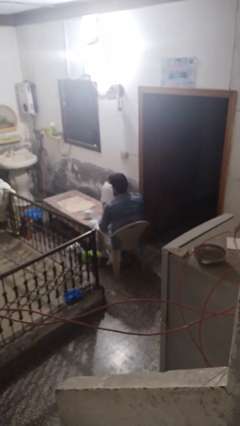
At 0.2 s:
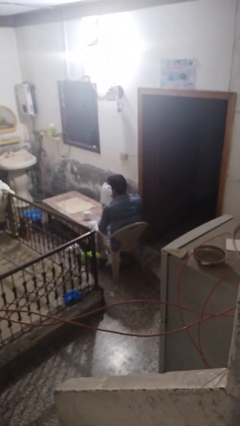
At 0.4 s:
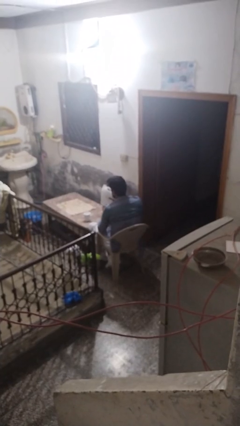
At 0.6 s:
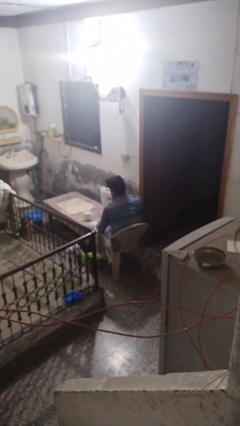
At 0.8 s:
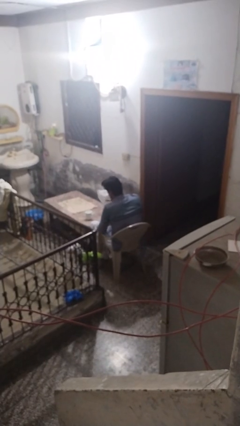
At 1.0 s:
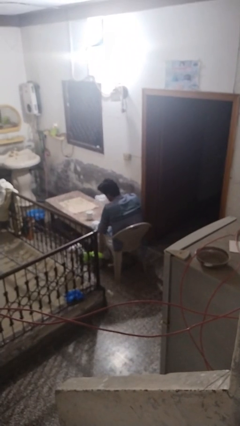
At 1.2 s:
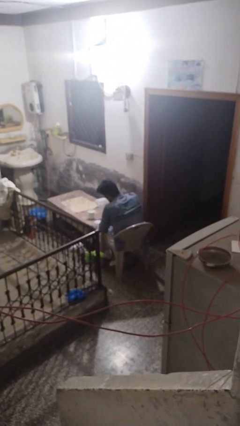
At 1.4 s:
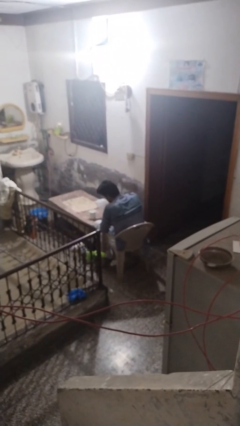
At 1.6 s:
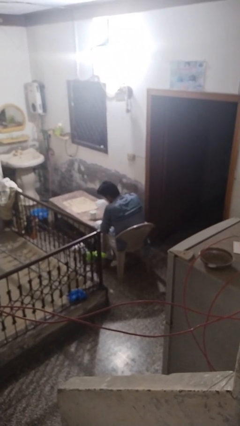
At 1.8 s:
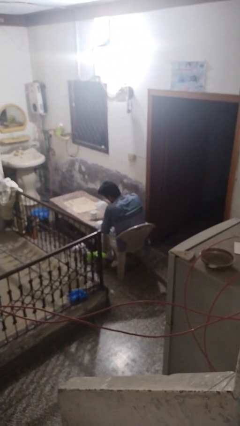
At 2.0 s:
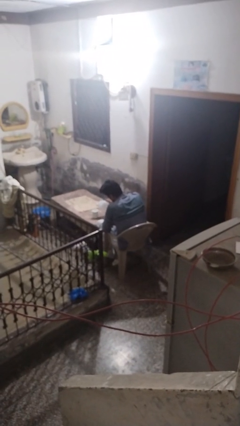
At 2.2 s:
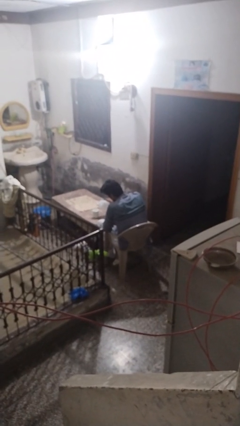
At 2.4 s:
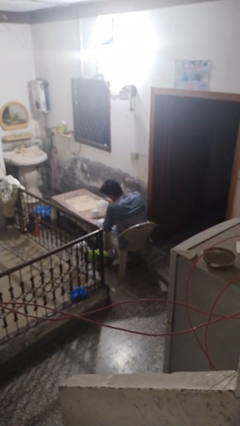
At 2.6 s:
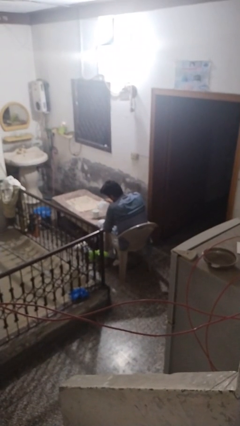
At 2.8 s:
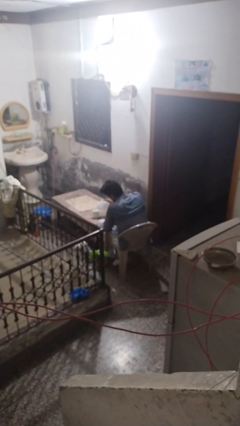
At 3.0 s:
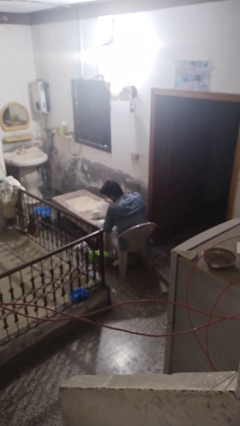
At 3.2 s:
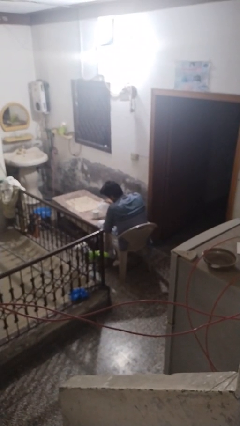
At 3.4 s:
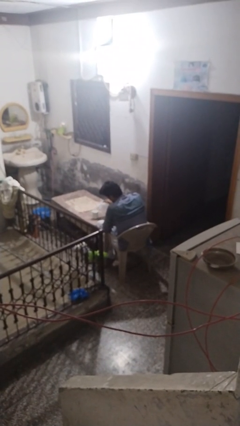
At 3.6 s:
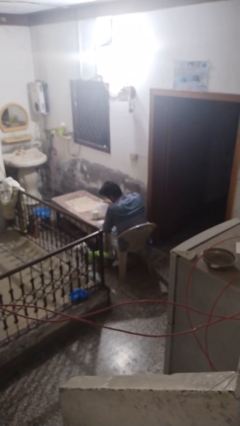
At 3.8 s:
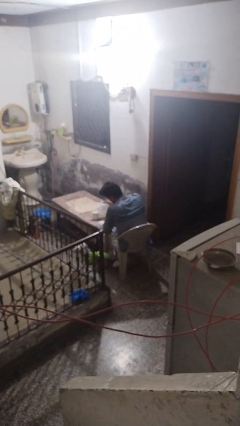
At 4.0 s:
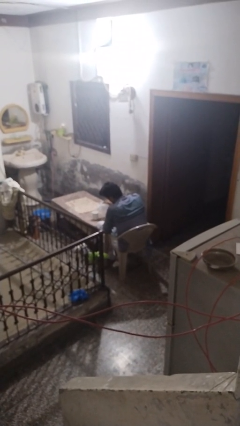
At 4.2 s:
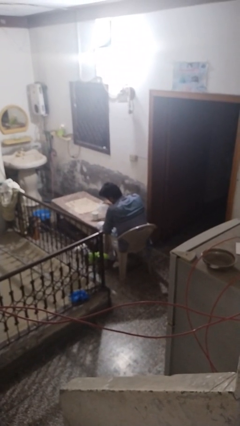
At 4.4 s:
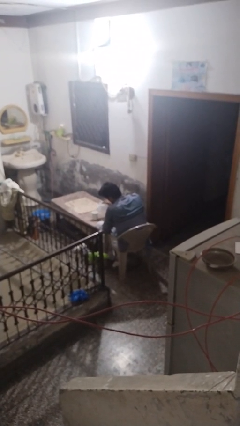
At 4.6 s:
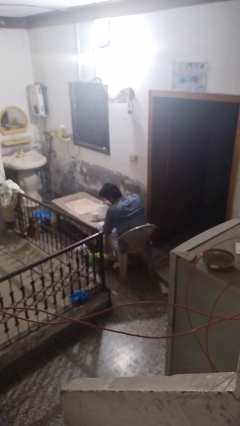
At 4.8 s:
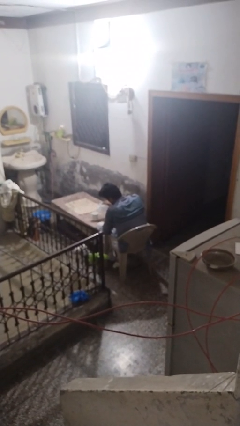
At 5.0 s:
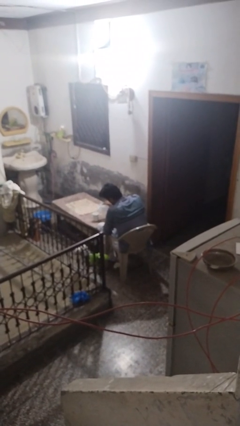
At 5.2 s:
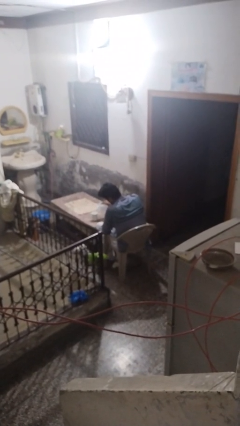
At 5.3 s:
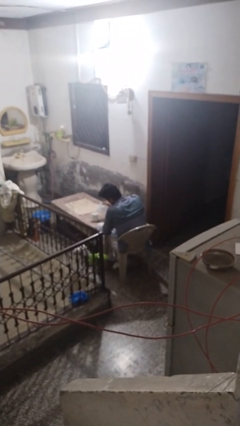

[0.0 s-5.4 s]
person pours liquid into cup

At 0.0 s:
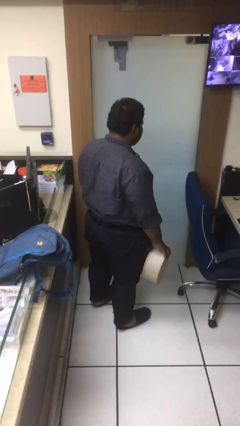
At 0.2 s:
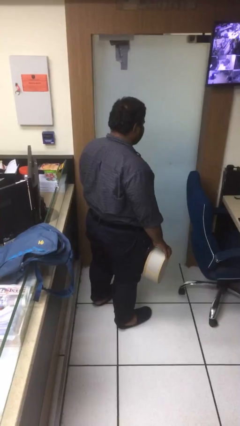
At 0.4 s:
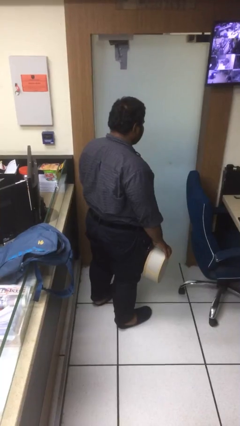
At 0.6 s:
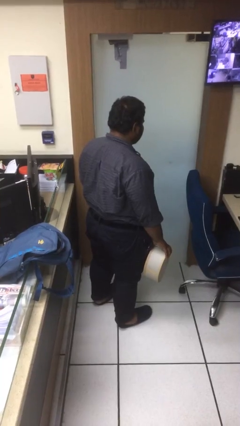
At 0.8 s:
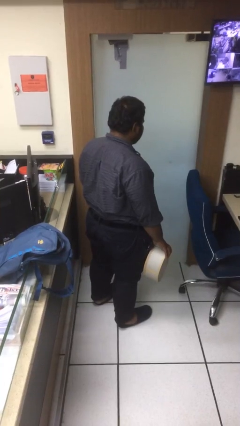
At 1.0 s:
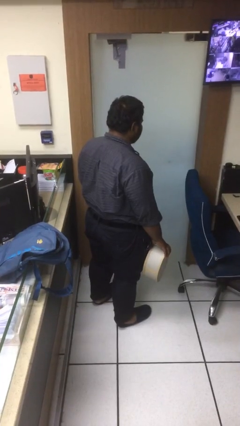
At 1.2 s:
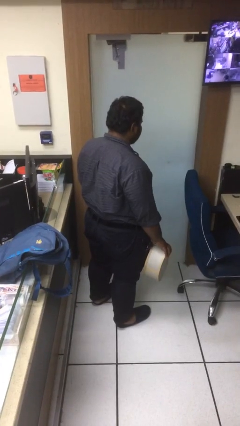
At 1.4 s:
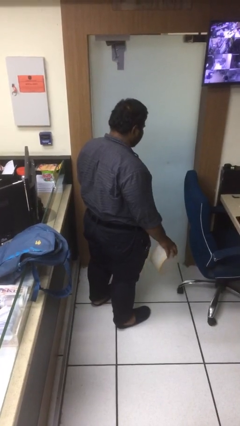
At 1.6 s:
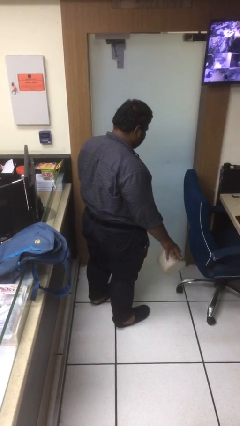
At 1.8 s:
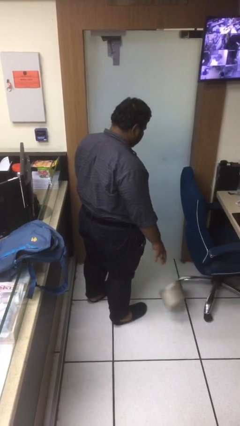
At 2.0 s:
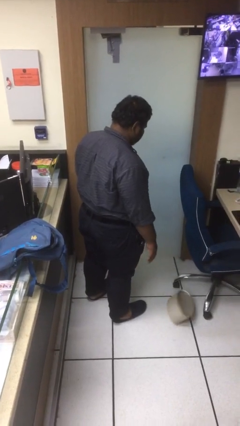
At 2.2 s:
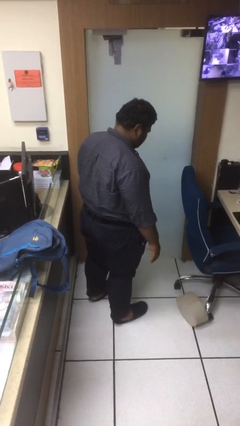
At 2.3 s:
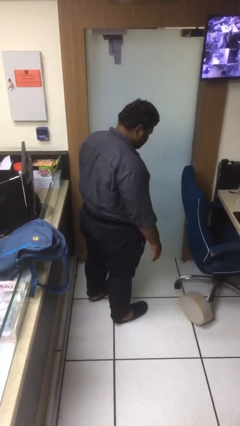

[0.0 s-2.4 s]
person drops object

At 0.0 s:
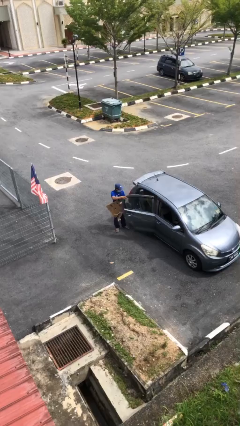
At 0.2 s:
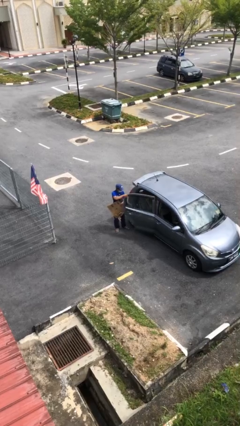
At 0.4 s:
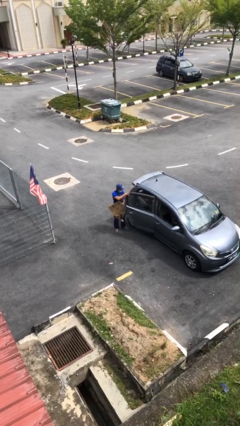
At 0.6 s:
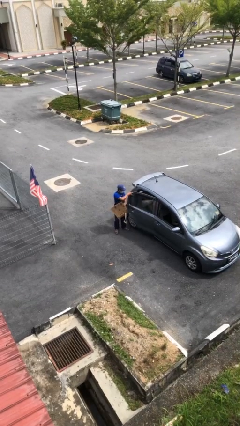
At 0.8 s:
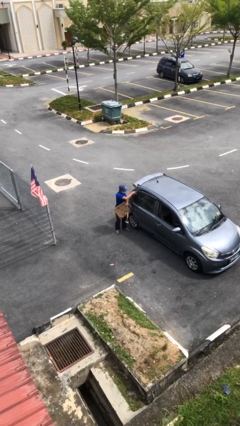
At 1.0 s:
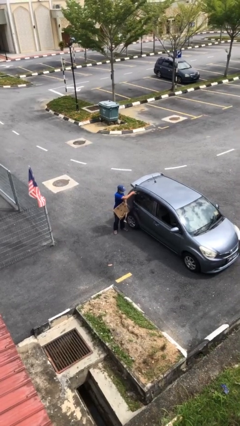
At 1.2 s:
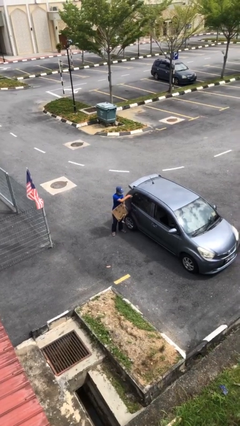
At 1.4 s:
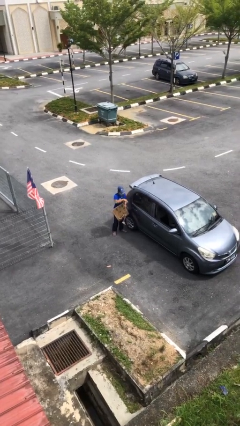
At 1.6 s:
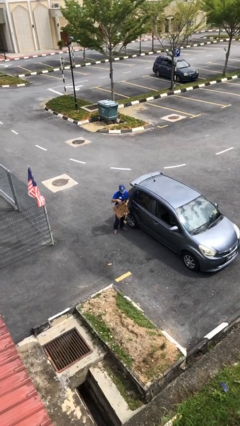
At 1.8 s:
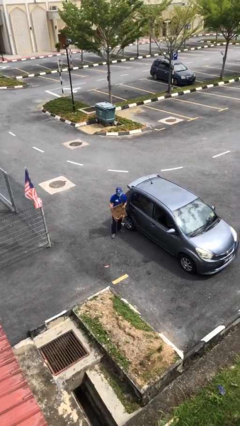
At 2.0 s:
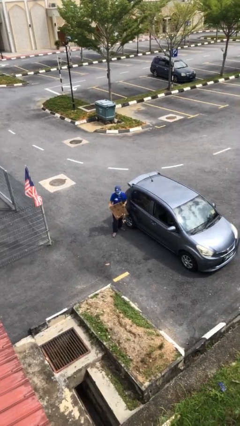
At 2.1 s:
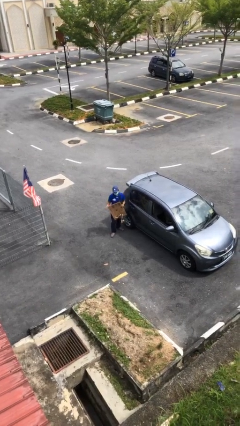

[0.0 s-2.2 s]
person closes car door

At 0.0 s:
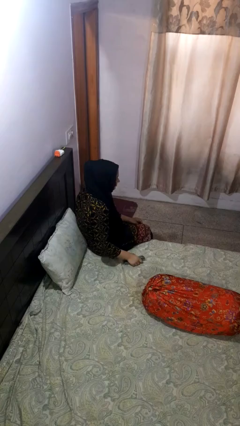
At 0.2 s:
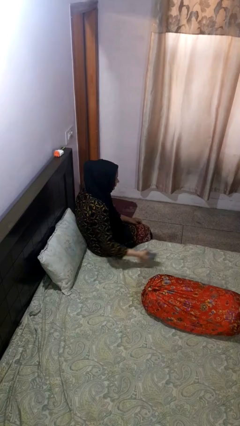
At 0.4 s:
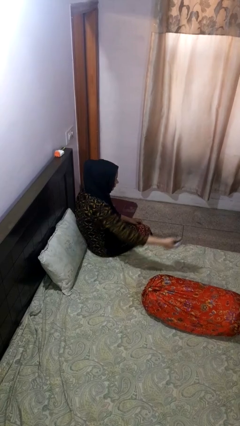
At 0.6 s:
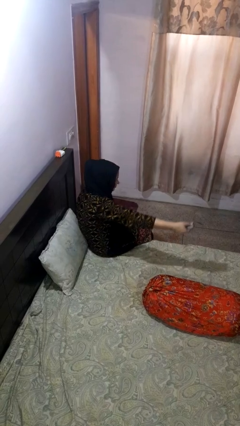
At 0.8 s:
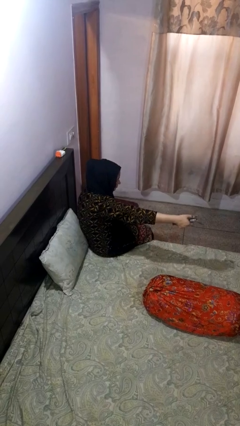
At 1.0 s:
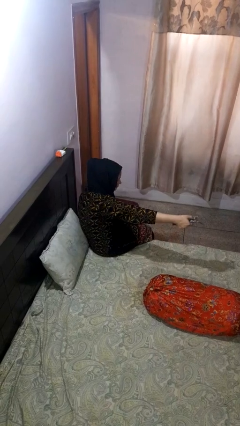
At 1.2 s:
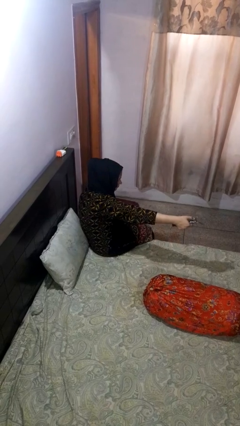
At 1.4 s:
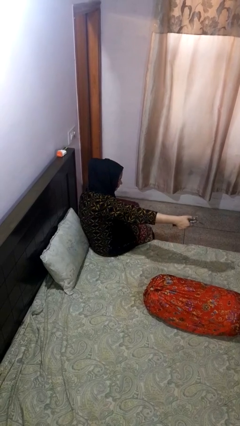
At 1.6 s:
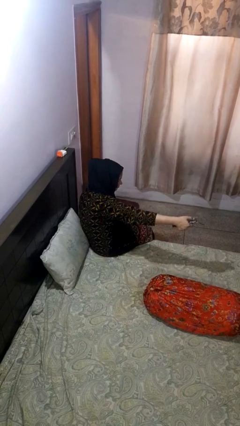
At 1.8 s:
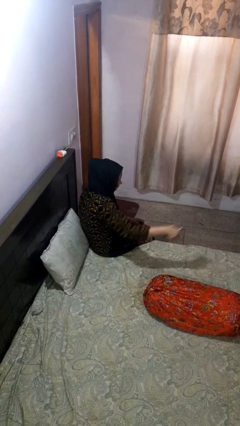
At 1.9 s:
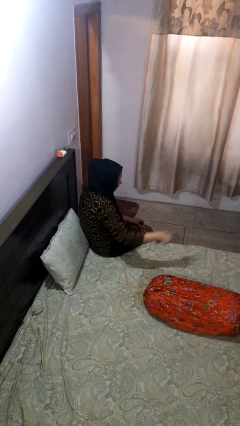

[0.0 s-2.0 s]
person uses television remote

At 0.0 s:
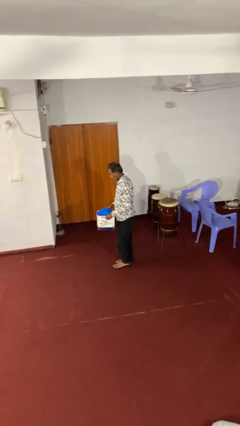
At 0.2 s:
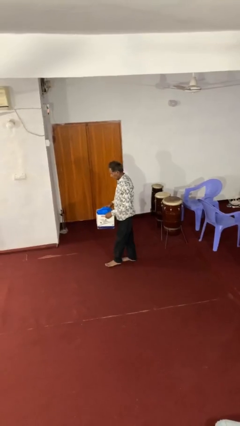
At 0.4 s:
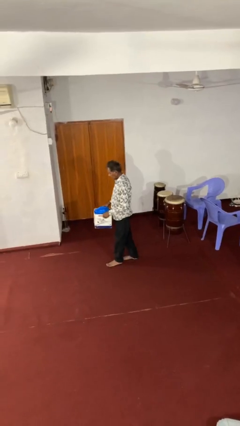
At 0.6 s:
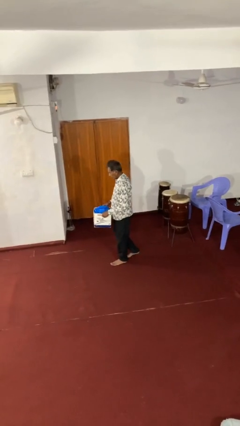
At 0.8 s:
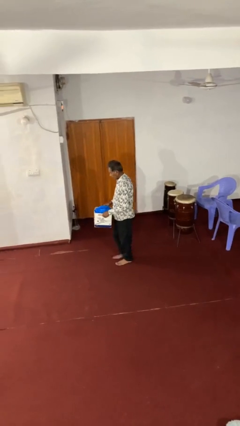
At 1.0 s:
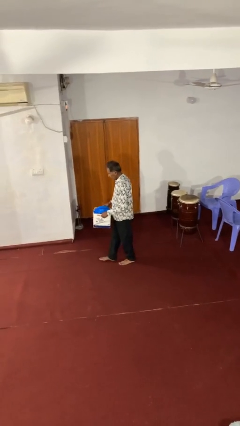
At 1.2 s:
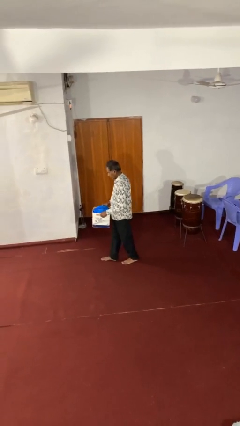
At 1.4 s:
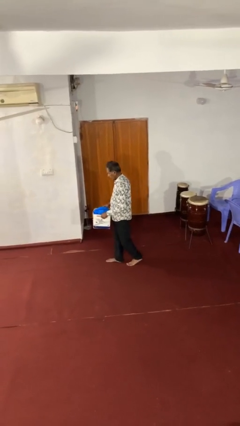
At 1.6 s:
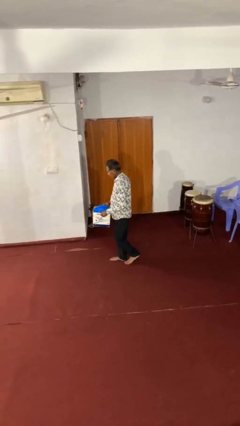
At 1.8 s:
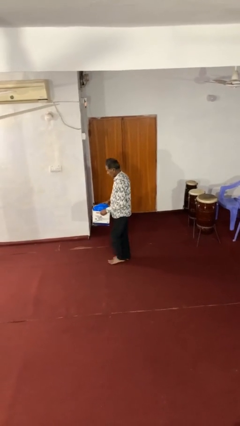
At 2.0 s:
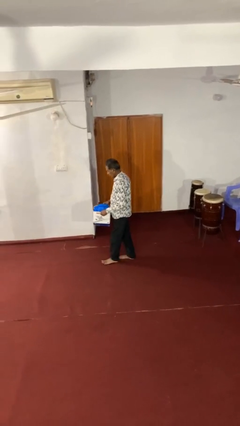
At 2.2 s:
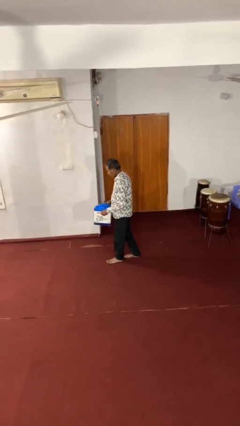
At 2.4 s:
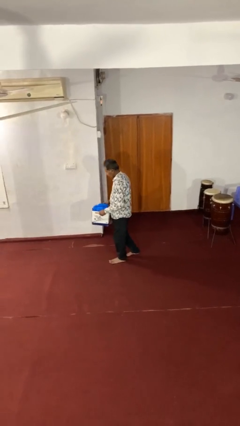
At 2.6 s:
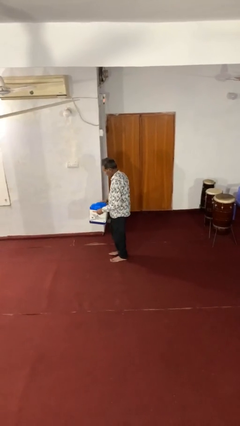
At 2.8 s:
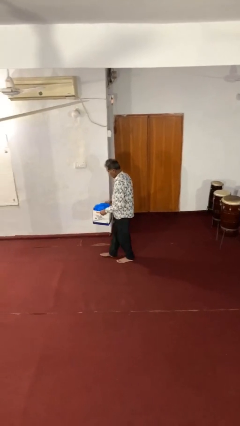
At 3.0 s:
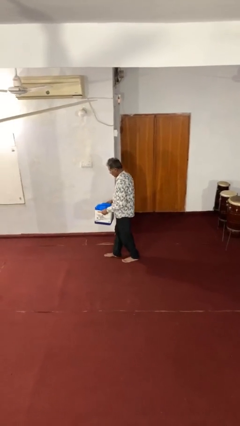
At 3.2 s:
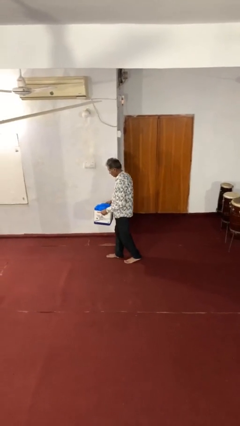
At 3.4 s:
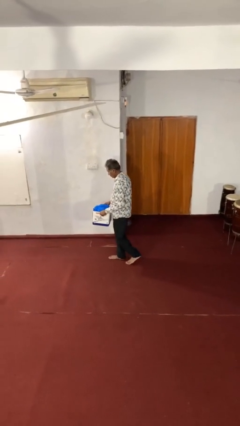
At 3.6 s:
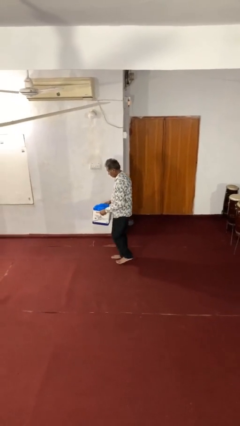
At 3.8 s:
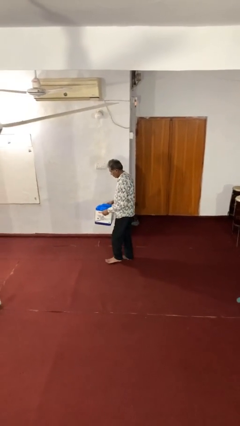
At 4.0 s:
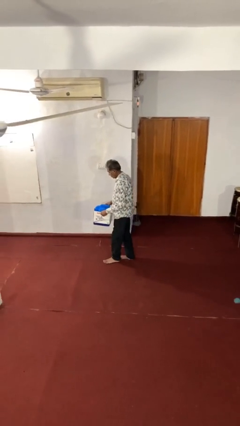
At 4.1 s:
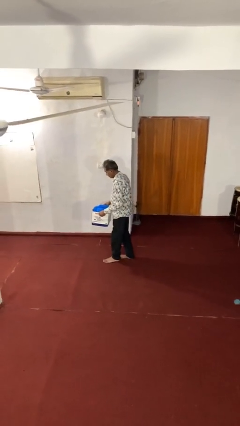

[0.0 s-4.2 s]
person carries heavy object

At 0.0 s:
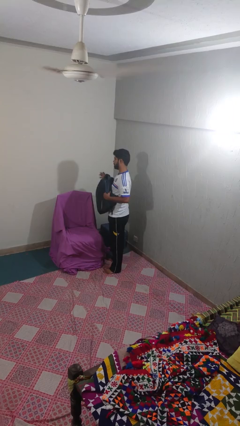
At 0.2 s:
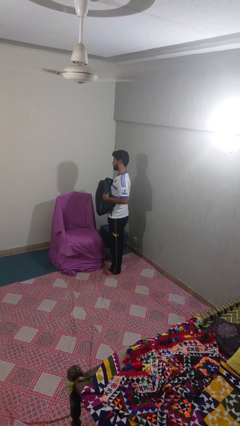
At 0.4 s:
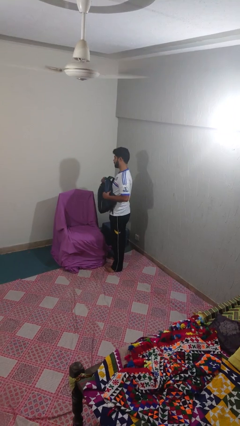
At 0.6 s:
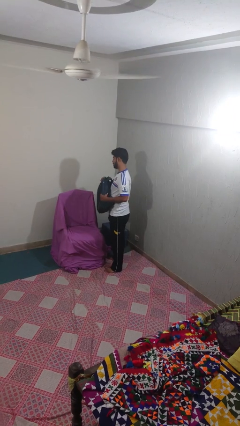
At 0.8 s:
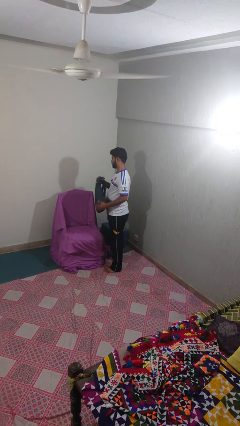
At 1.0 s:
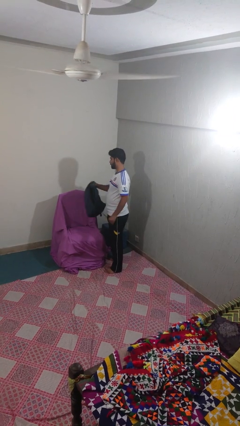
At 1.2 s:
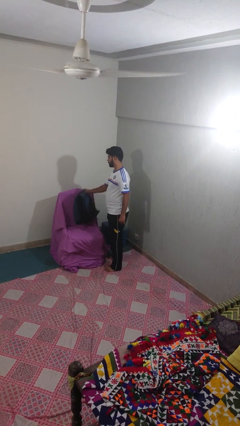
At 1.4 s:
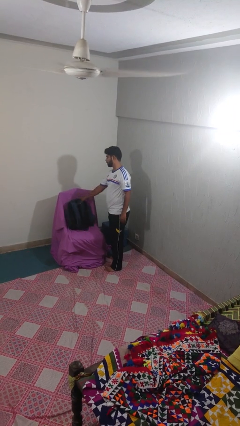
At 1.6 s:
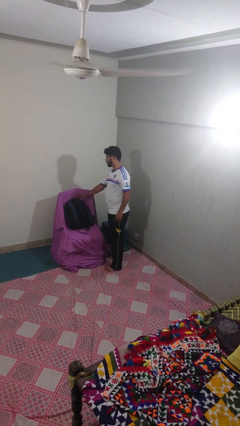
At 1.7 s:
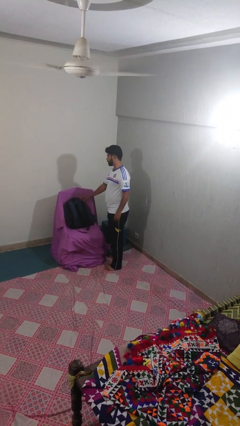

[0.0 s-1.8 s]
person puts down object on couch
